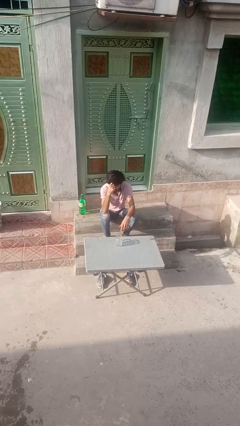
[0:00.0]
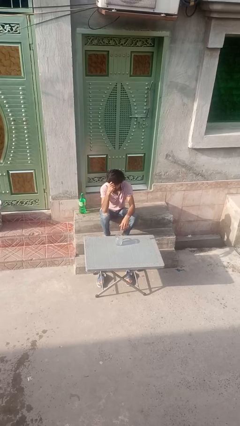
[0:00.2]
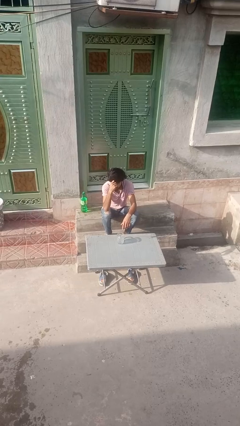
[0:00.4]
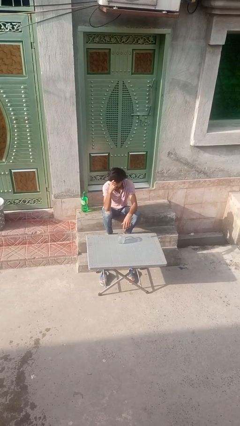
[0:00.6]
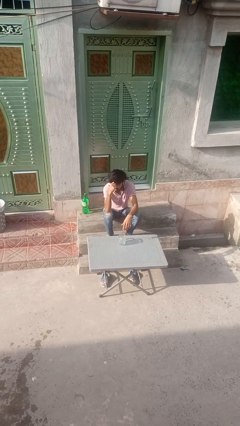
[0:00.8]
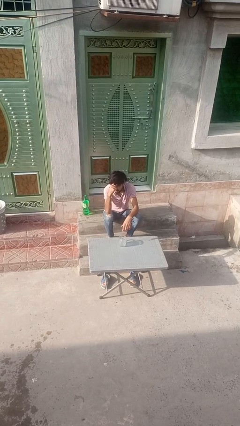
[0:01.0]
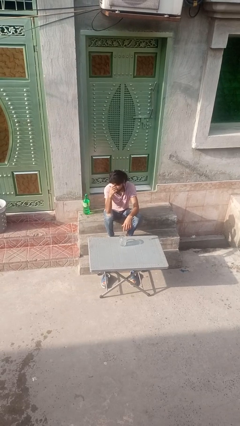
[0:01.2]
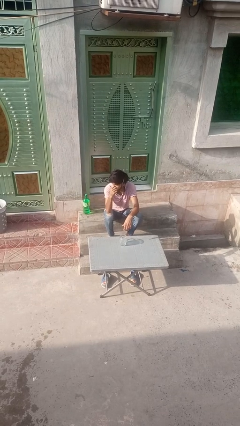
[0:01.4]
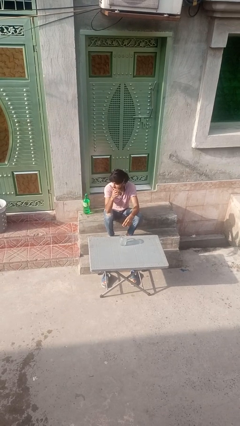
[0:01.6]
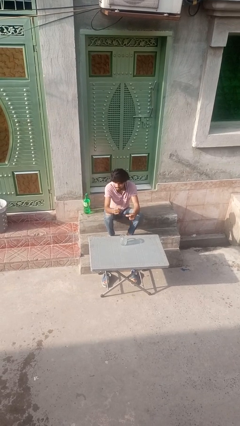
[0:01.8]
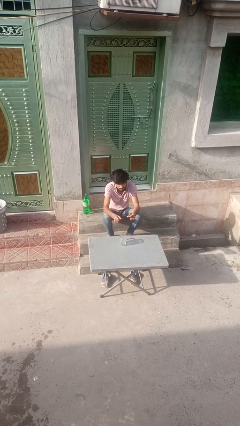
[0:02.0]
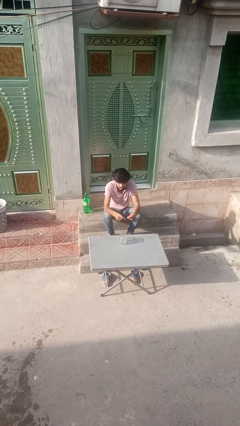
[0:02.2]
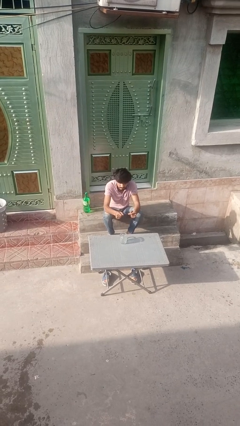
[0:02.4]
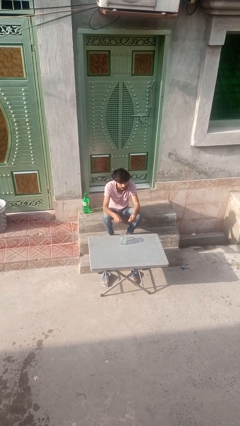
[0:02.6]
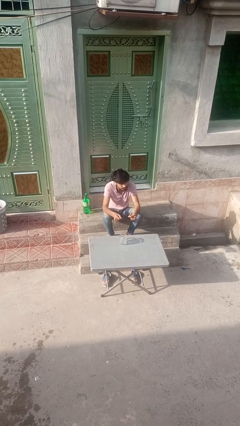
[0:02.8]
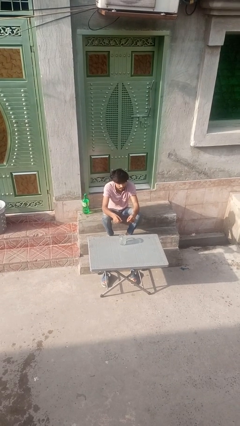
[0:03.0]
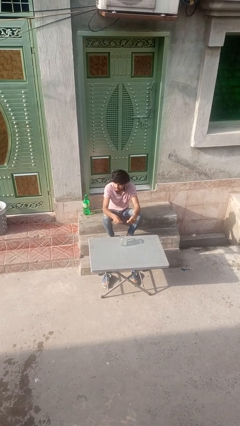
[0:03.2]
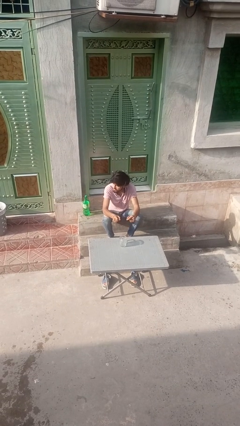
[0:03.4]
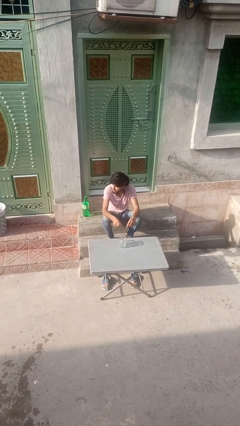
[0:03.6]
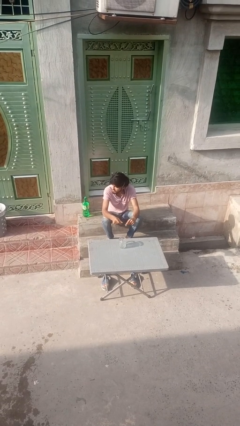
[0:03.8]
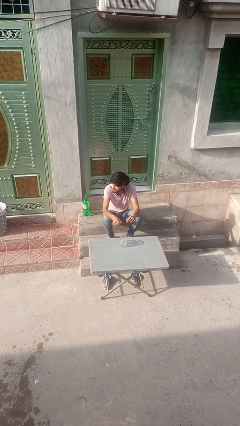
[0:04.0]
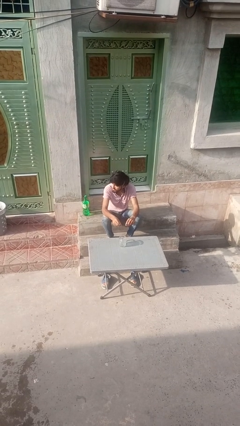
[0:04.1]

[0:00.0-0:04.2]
person snaps fingers

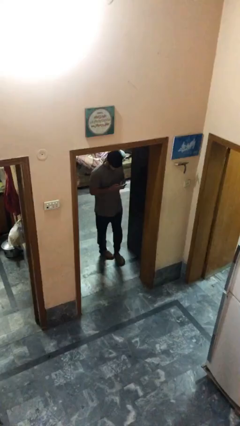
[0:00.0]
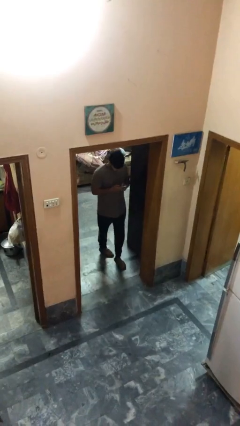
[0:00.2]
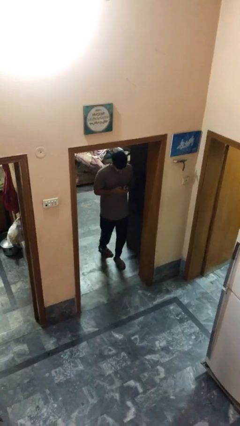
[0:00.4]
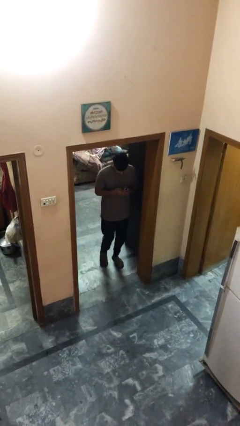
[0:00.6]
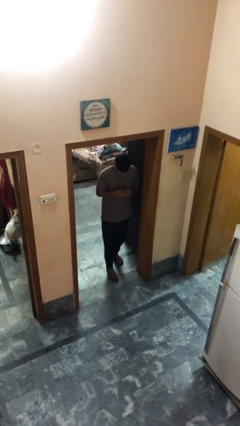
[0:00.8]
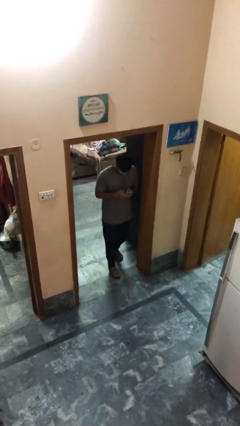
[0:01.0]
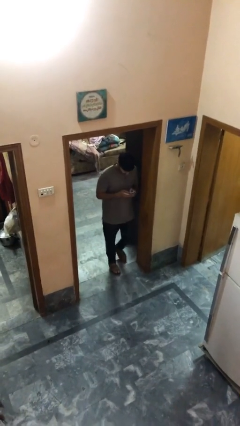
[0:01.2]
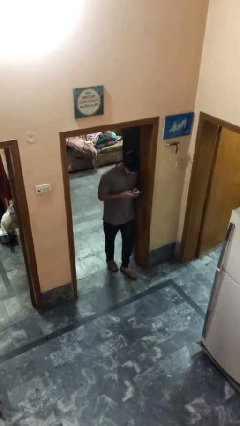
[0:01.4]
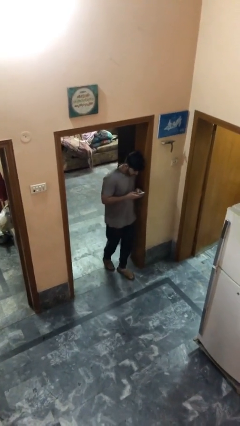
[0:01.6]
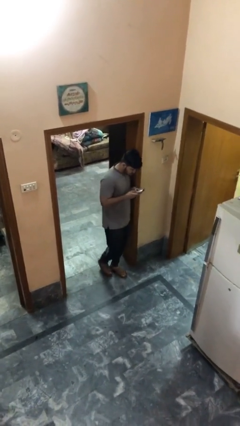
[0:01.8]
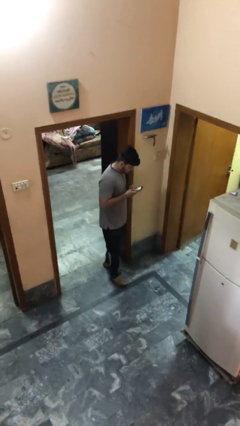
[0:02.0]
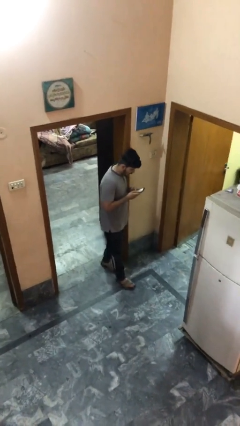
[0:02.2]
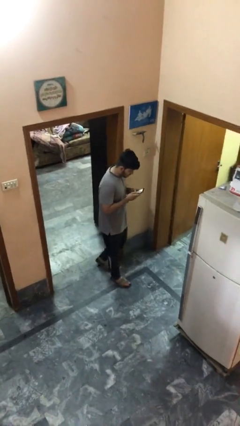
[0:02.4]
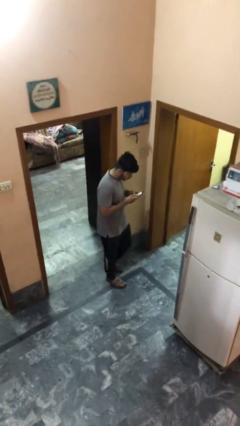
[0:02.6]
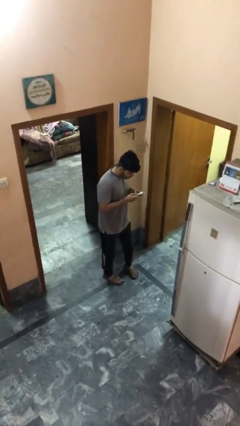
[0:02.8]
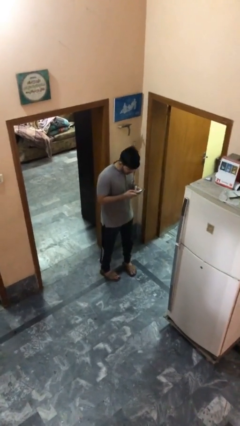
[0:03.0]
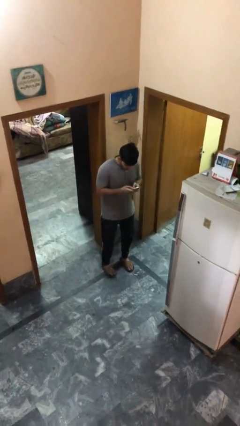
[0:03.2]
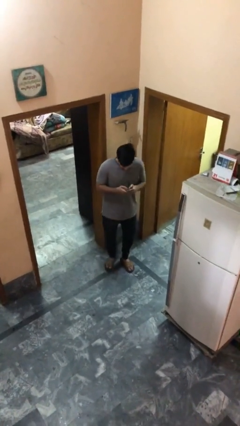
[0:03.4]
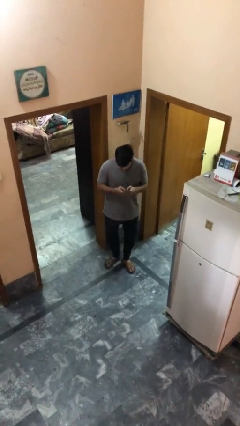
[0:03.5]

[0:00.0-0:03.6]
person enters scene through structure

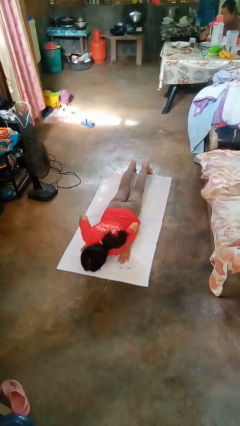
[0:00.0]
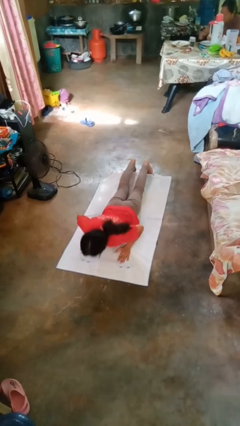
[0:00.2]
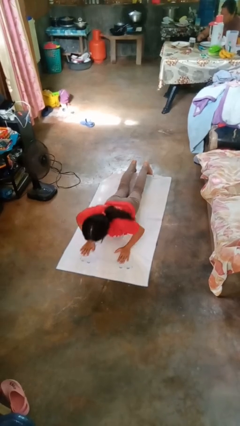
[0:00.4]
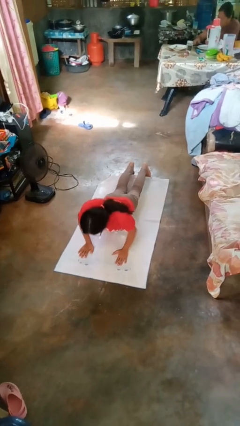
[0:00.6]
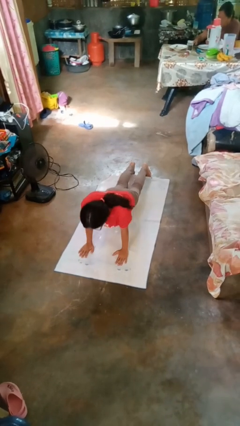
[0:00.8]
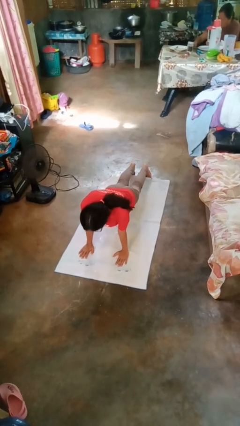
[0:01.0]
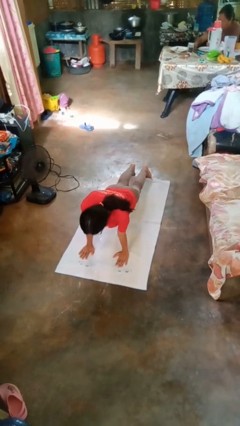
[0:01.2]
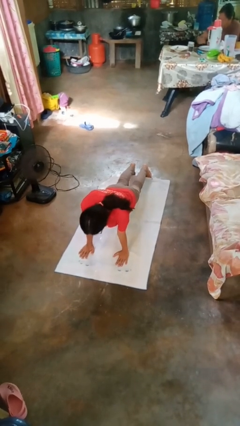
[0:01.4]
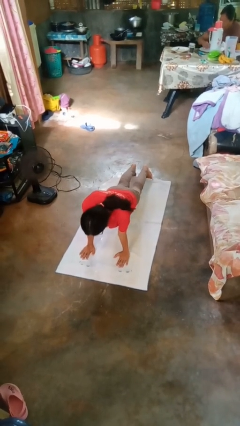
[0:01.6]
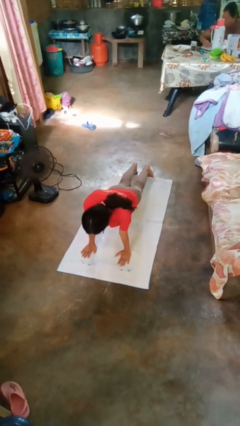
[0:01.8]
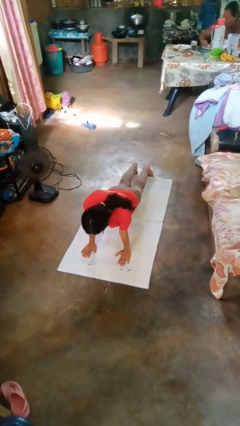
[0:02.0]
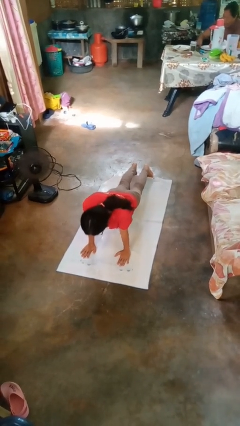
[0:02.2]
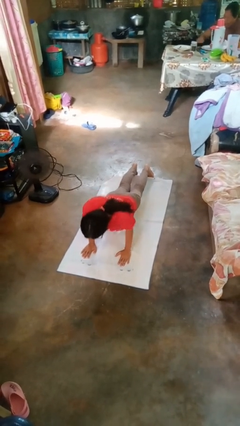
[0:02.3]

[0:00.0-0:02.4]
person exercises with pushup

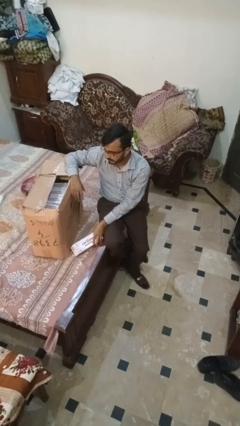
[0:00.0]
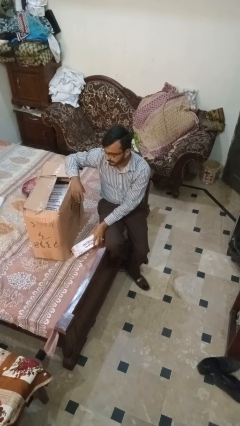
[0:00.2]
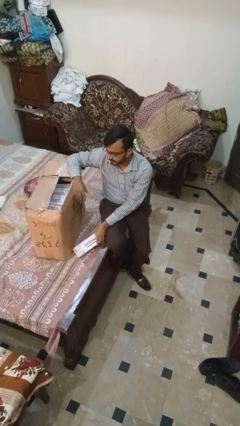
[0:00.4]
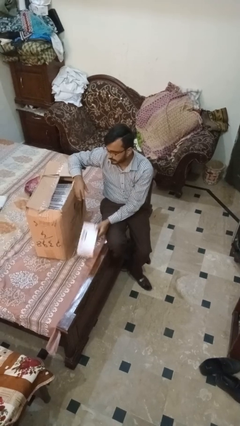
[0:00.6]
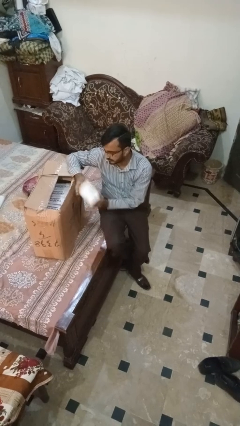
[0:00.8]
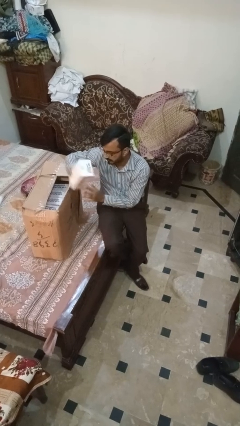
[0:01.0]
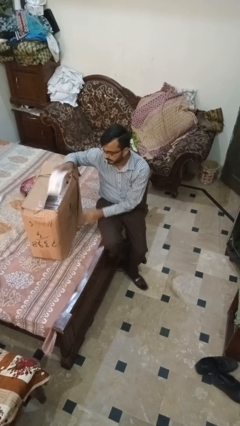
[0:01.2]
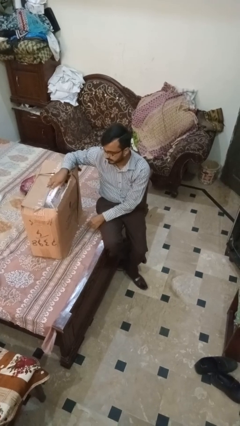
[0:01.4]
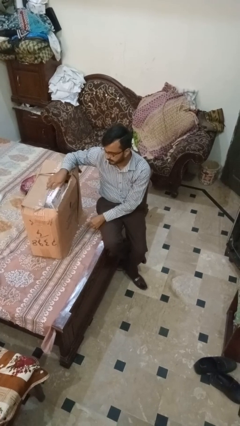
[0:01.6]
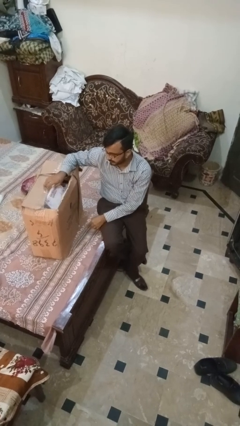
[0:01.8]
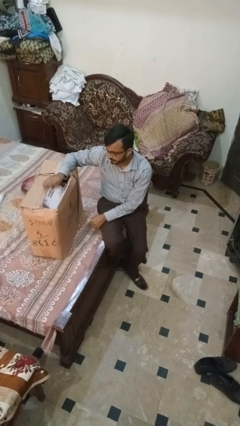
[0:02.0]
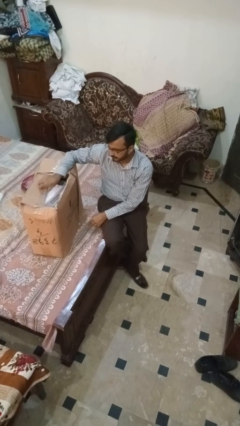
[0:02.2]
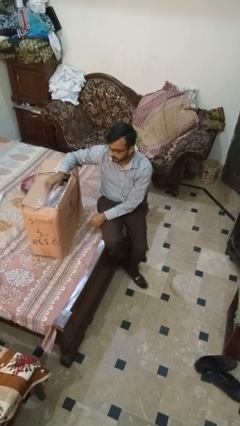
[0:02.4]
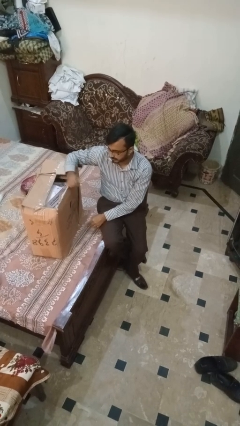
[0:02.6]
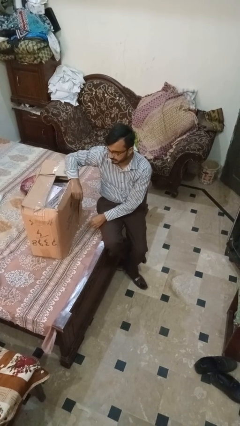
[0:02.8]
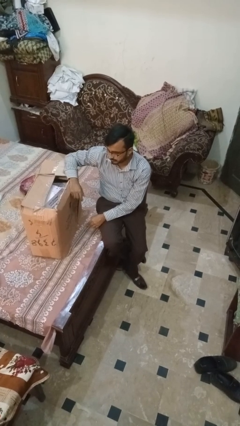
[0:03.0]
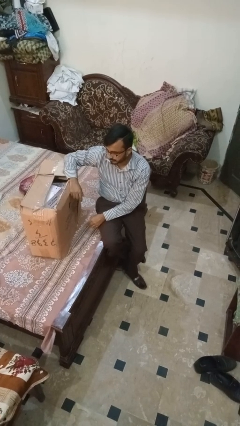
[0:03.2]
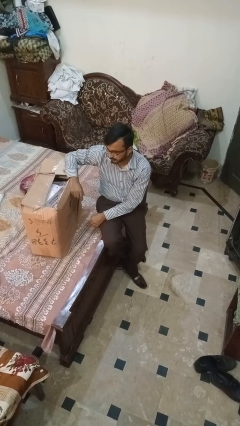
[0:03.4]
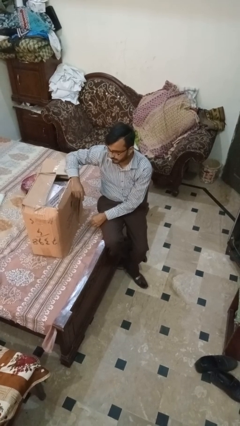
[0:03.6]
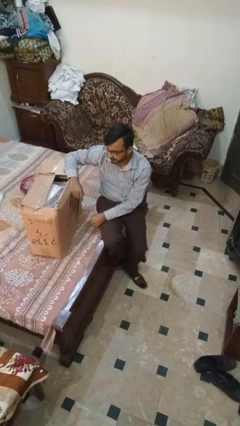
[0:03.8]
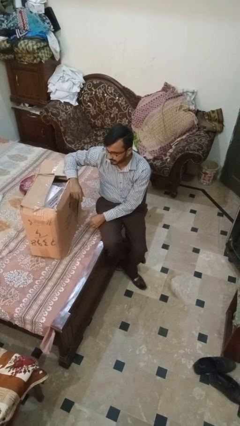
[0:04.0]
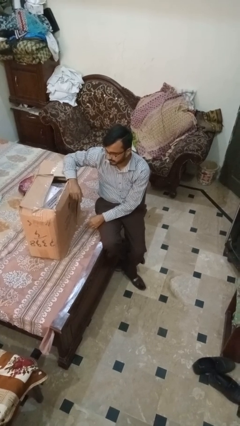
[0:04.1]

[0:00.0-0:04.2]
person puts object into box

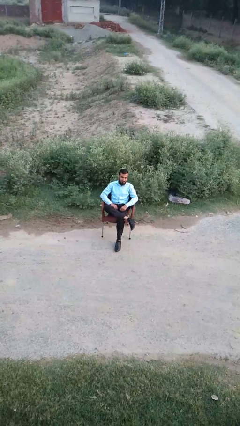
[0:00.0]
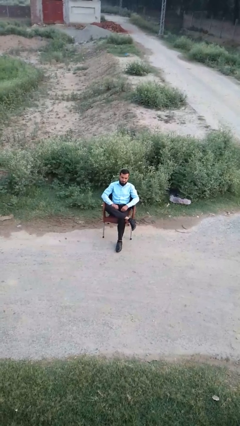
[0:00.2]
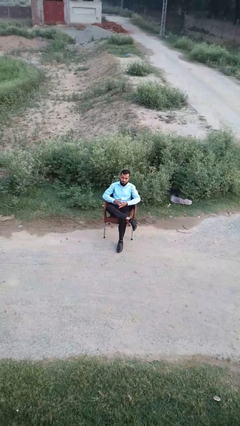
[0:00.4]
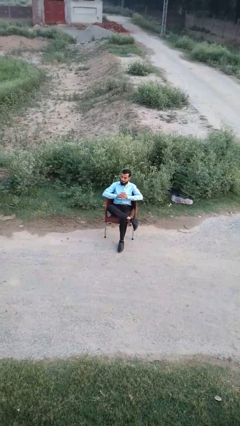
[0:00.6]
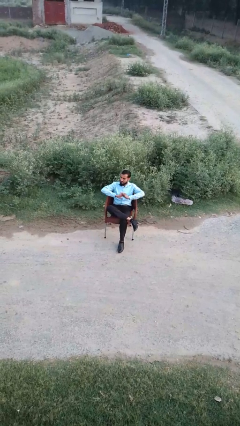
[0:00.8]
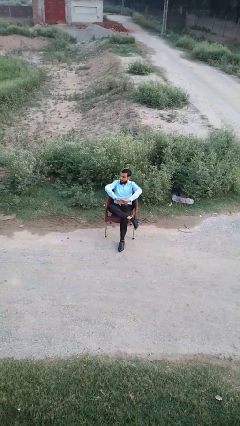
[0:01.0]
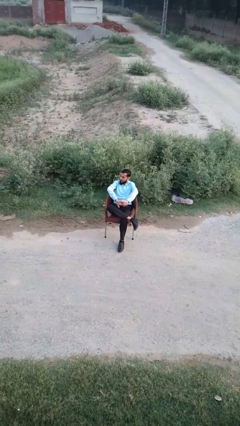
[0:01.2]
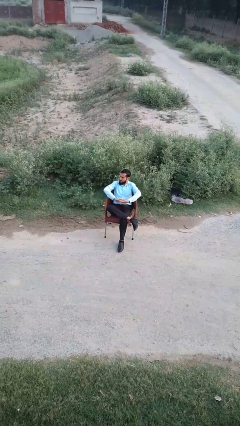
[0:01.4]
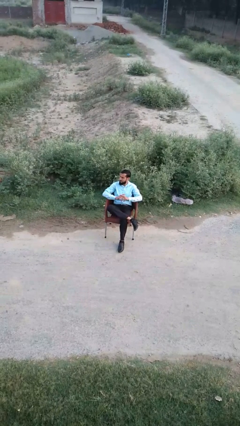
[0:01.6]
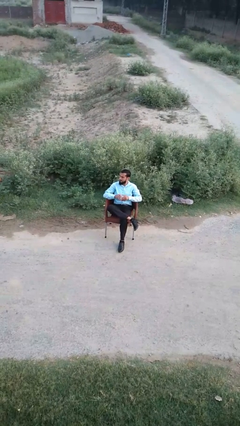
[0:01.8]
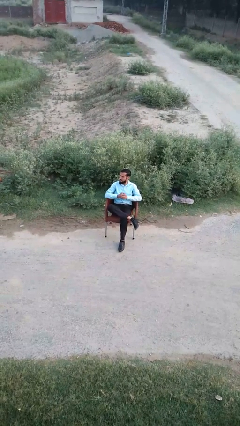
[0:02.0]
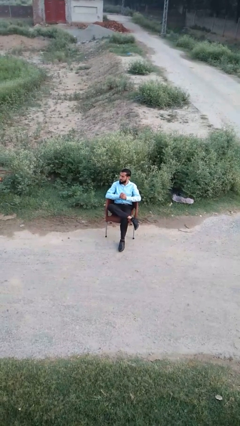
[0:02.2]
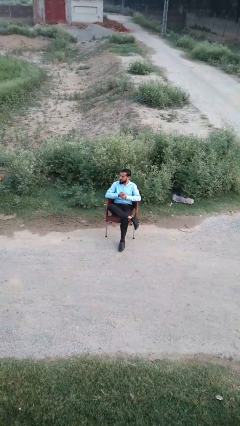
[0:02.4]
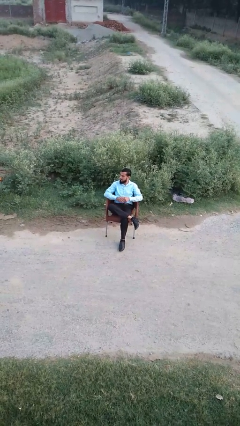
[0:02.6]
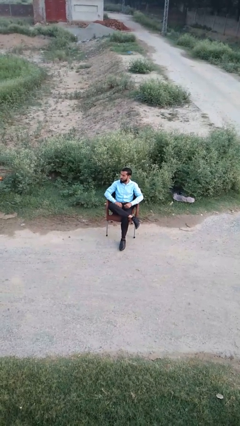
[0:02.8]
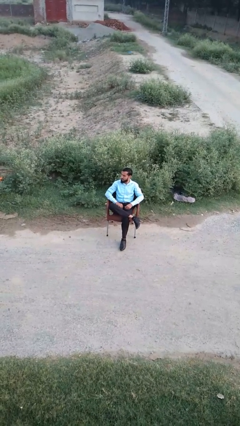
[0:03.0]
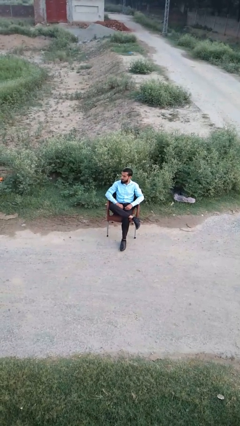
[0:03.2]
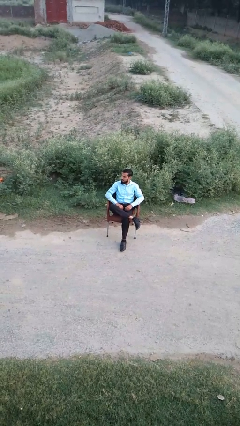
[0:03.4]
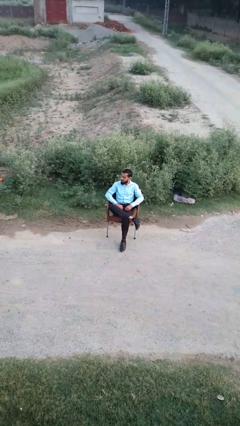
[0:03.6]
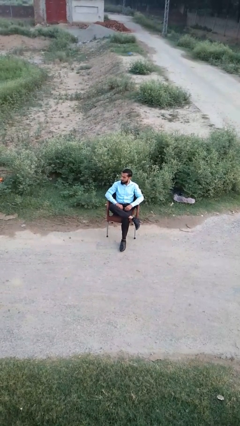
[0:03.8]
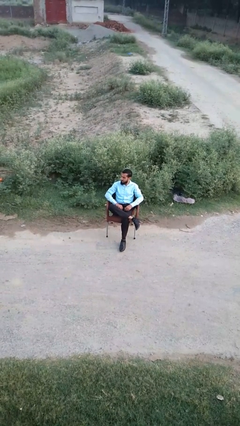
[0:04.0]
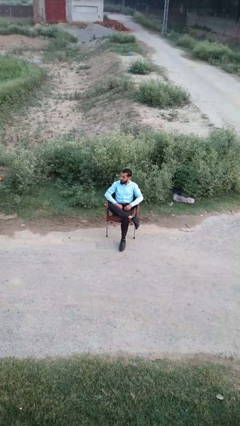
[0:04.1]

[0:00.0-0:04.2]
person cracks knuckles
